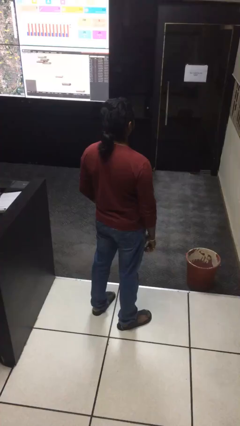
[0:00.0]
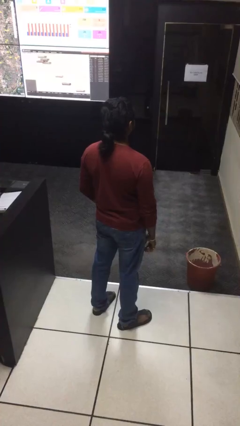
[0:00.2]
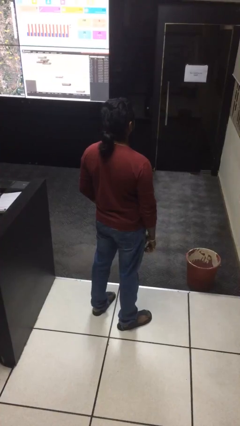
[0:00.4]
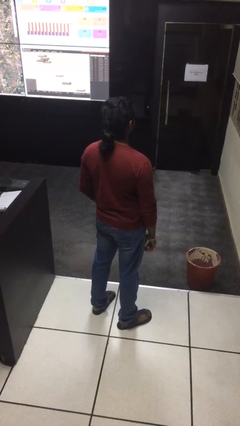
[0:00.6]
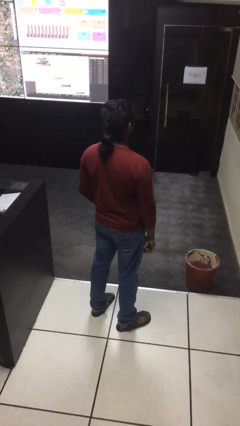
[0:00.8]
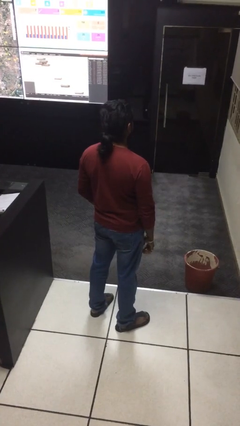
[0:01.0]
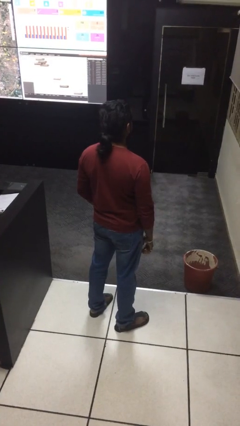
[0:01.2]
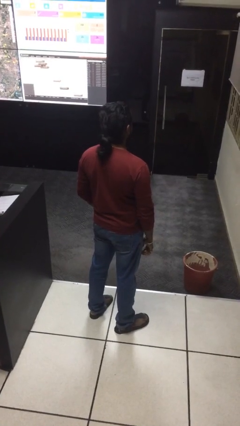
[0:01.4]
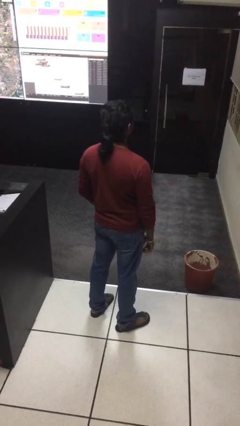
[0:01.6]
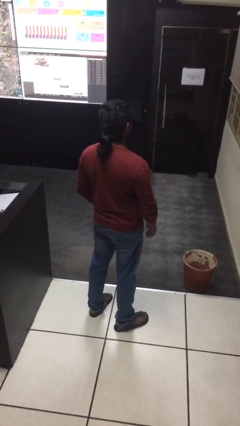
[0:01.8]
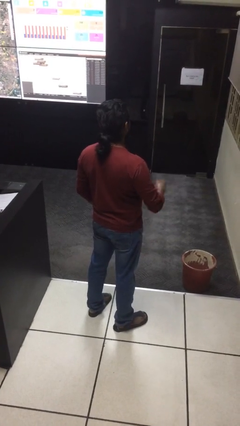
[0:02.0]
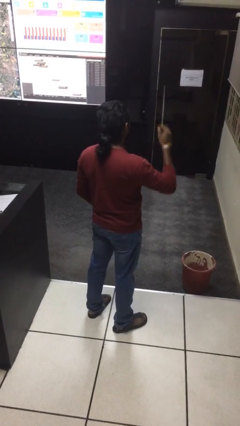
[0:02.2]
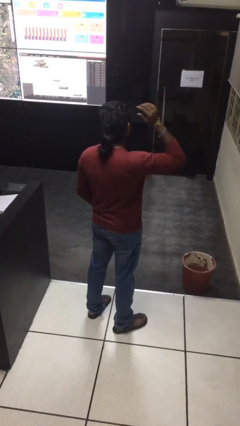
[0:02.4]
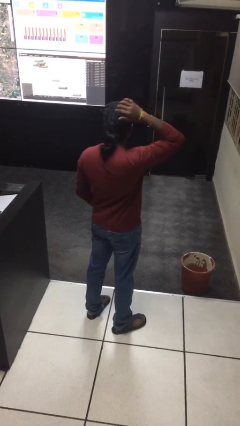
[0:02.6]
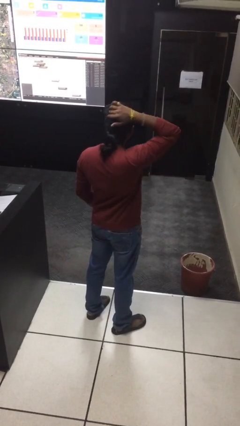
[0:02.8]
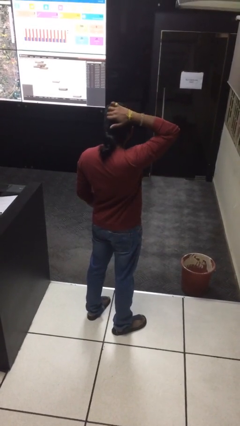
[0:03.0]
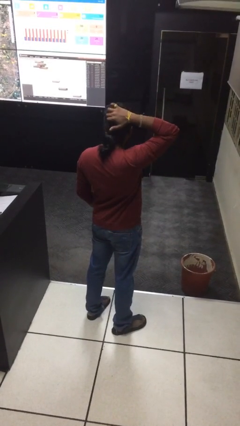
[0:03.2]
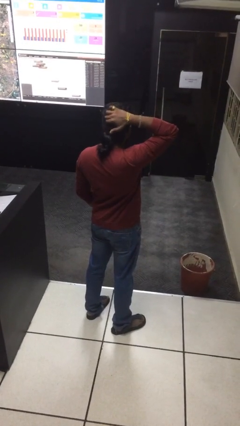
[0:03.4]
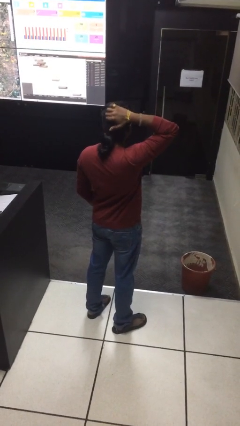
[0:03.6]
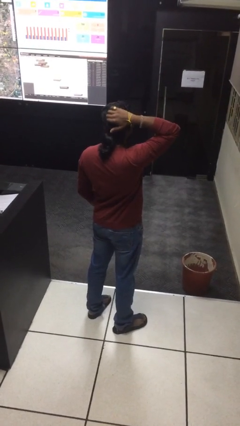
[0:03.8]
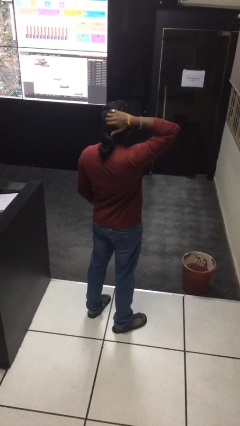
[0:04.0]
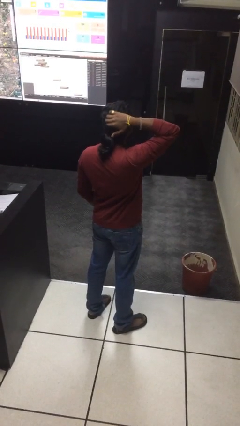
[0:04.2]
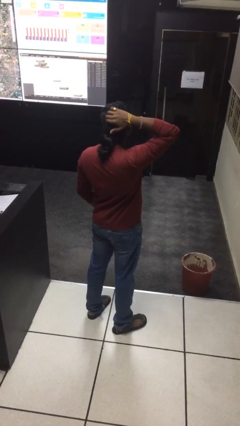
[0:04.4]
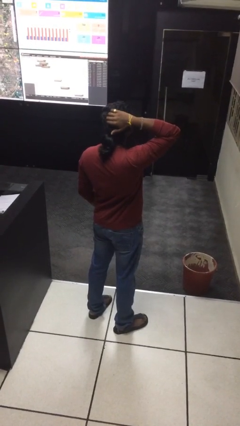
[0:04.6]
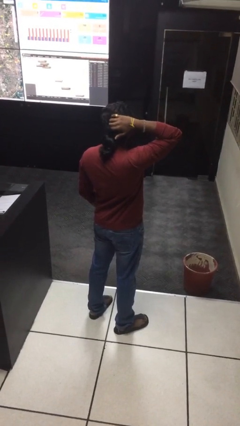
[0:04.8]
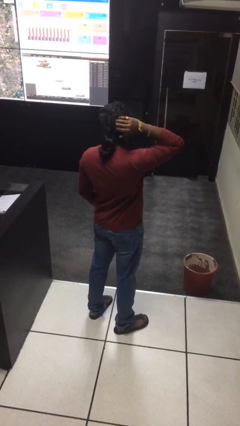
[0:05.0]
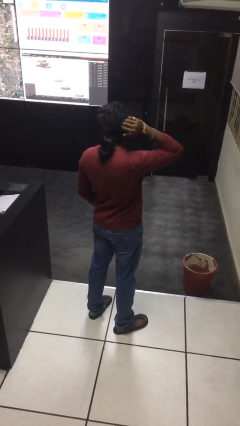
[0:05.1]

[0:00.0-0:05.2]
person scratches face

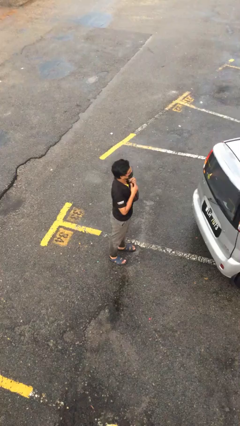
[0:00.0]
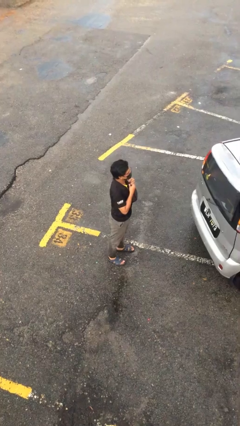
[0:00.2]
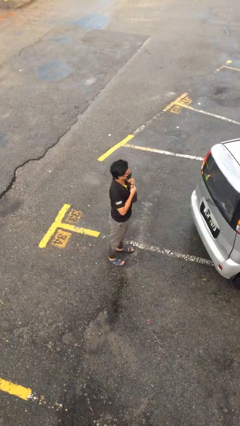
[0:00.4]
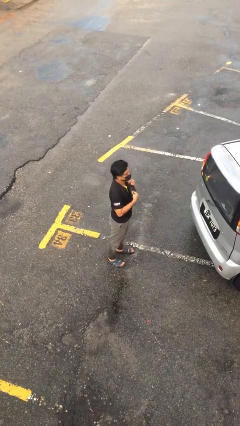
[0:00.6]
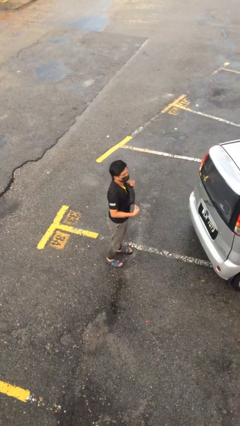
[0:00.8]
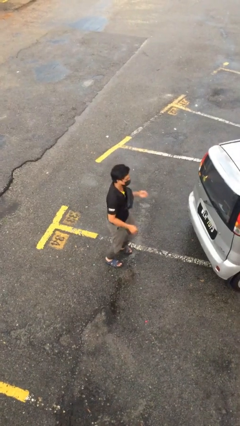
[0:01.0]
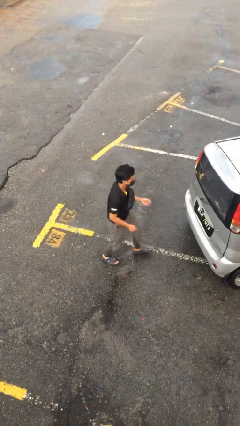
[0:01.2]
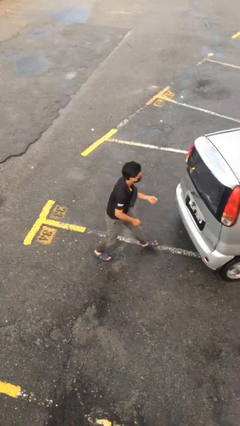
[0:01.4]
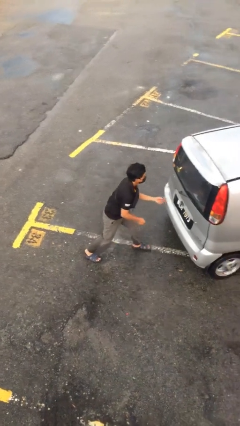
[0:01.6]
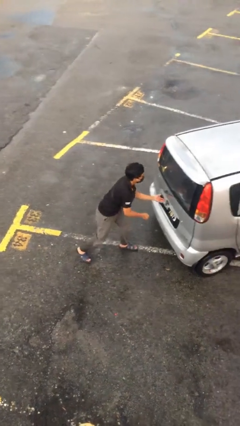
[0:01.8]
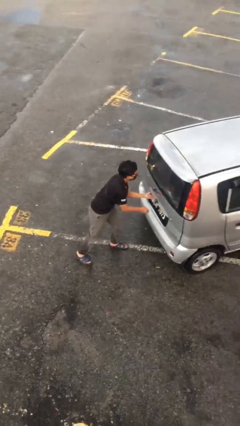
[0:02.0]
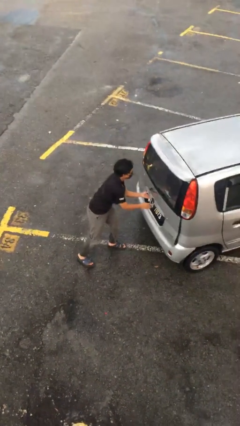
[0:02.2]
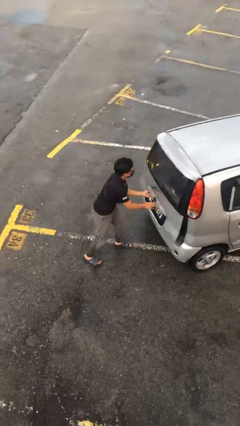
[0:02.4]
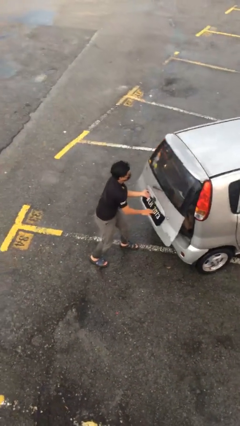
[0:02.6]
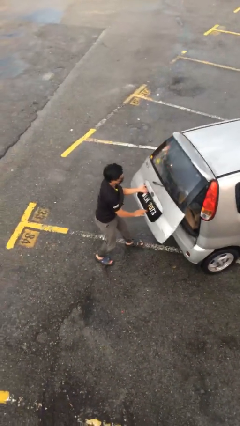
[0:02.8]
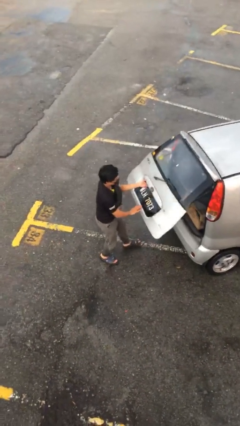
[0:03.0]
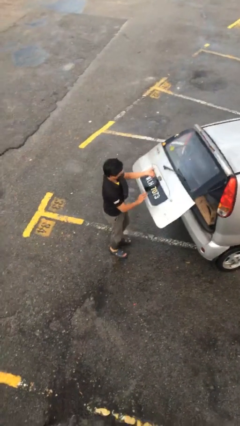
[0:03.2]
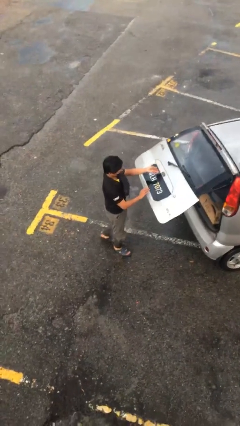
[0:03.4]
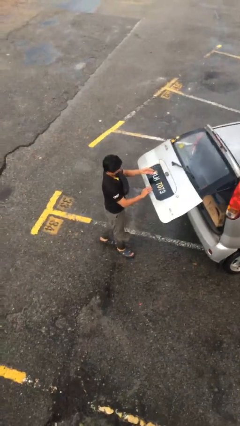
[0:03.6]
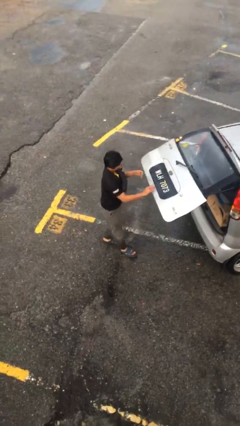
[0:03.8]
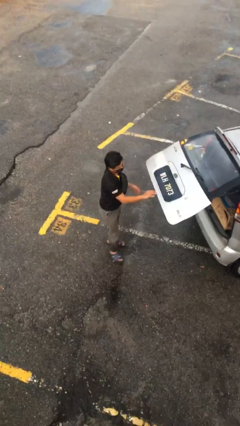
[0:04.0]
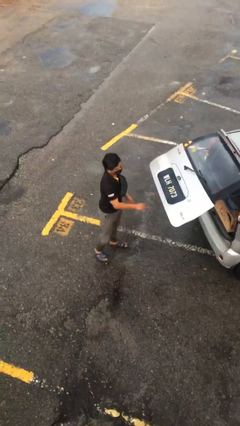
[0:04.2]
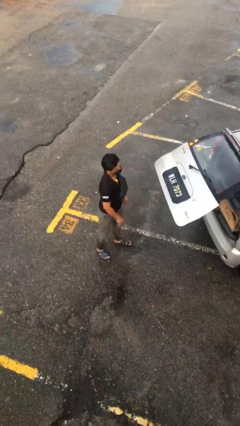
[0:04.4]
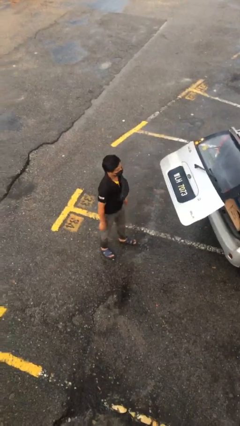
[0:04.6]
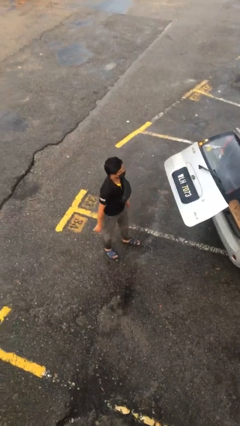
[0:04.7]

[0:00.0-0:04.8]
person opens car trunk

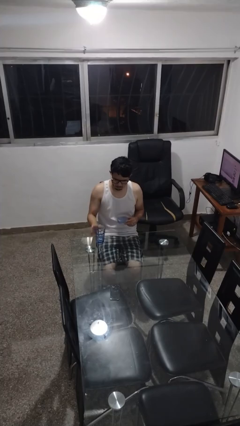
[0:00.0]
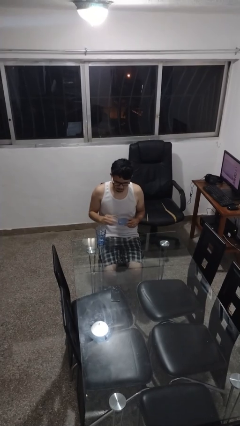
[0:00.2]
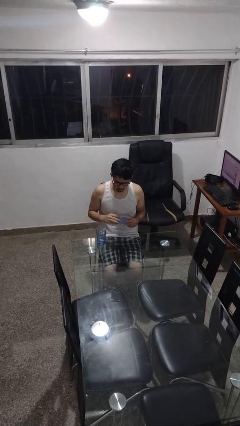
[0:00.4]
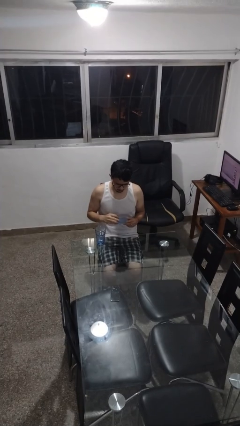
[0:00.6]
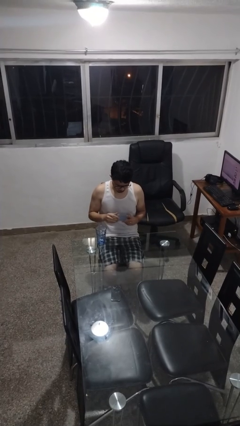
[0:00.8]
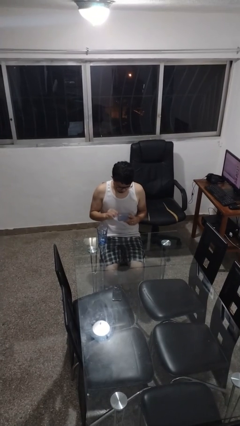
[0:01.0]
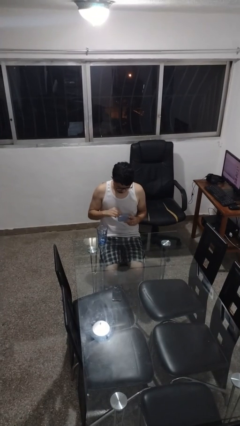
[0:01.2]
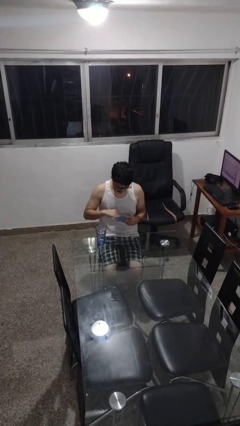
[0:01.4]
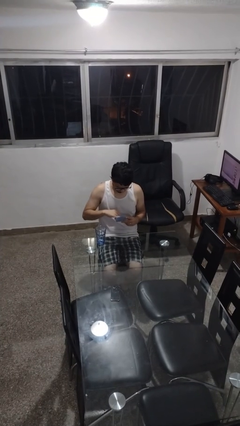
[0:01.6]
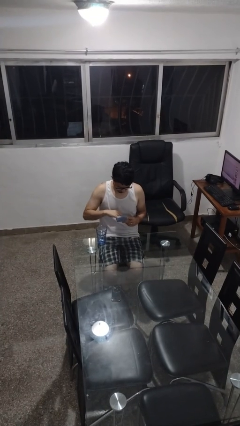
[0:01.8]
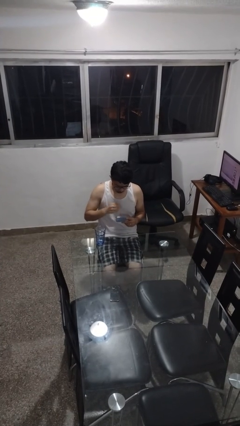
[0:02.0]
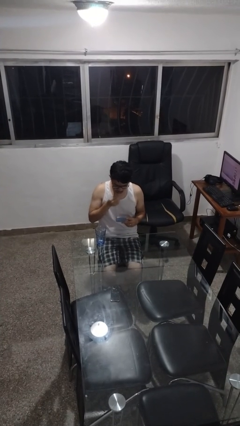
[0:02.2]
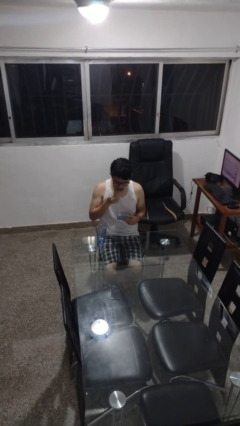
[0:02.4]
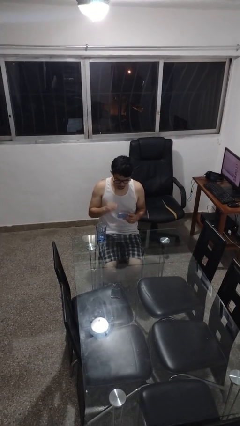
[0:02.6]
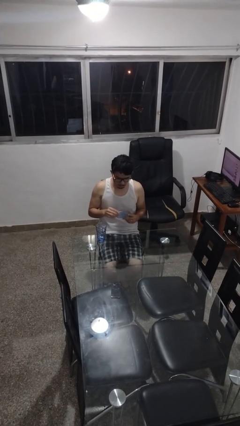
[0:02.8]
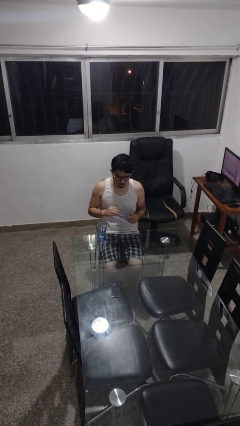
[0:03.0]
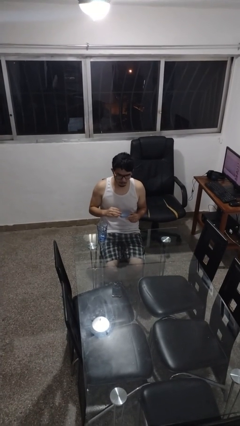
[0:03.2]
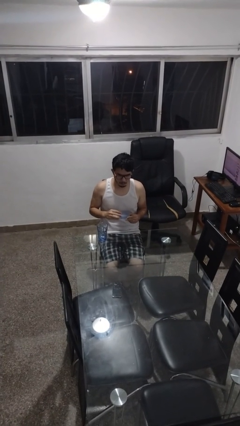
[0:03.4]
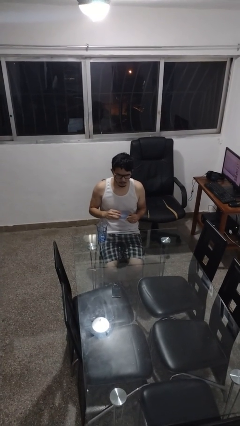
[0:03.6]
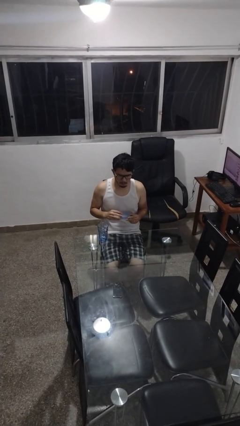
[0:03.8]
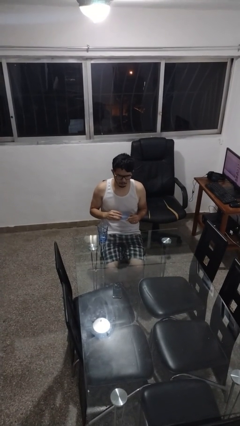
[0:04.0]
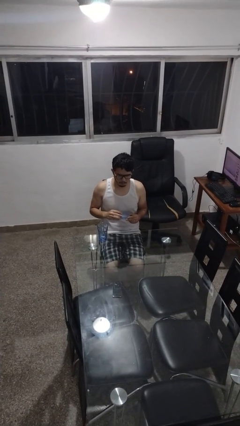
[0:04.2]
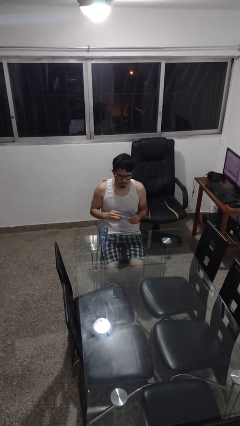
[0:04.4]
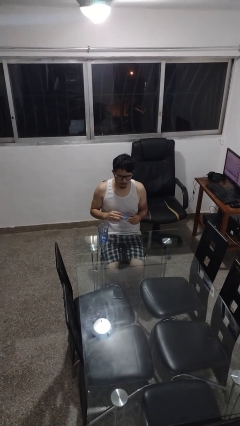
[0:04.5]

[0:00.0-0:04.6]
person takes medicine pills

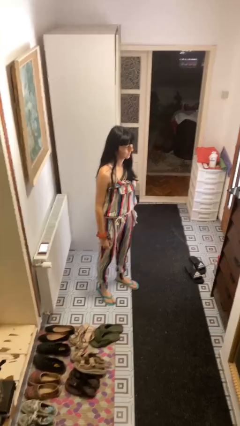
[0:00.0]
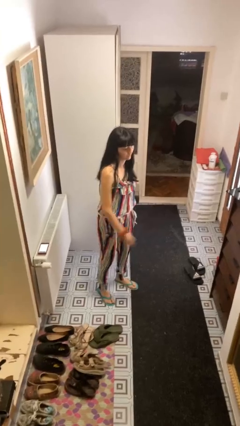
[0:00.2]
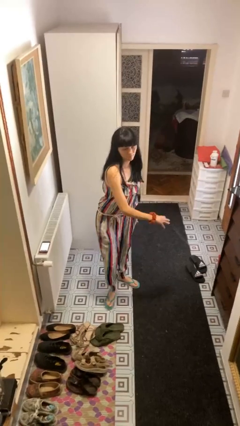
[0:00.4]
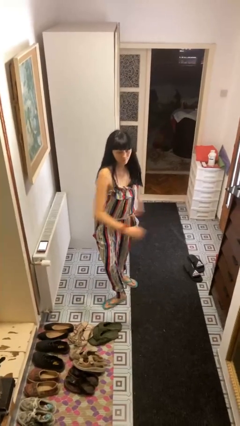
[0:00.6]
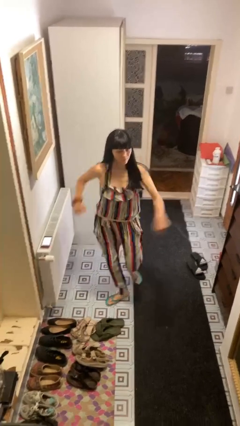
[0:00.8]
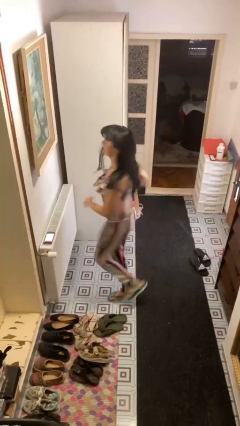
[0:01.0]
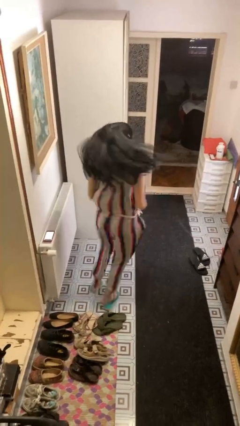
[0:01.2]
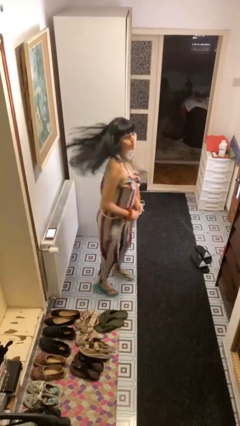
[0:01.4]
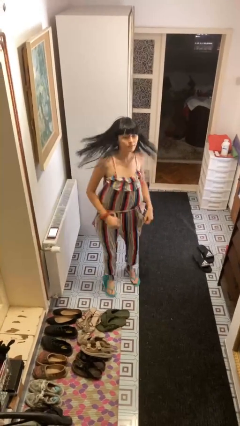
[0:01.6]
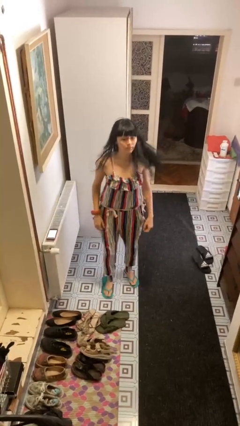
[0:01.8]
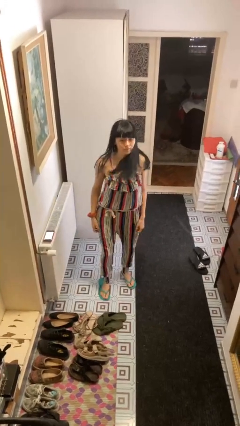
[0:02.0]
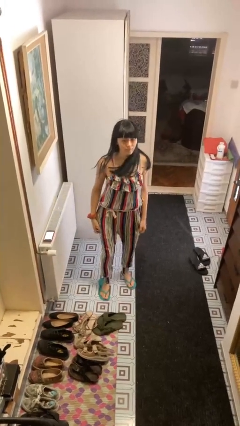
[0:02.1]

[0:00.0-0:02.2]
person twirls

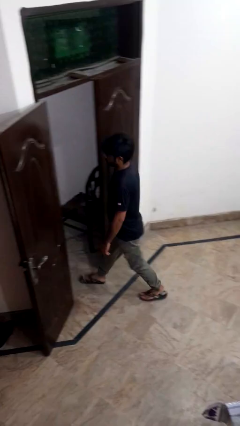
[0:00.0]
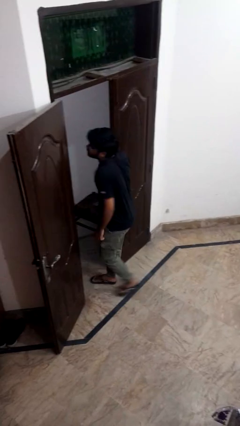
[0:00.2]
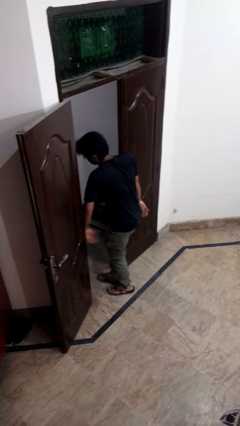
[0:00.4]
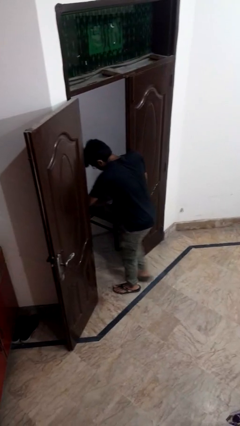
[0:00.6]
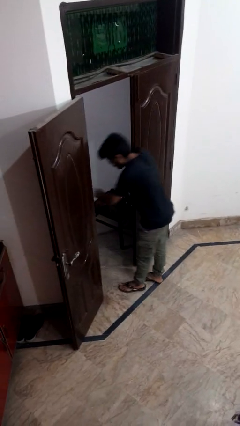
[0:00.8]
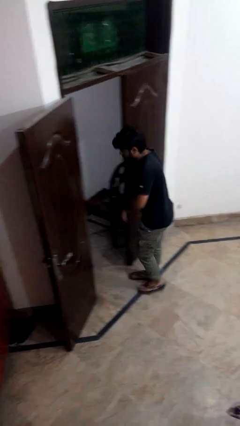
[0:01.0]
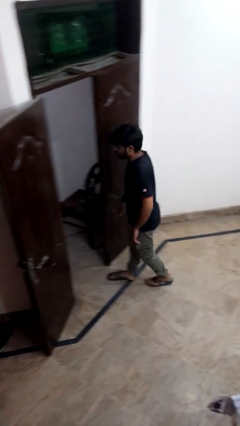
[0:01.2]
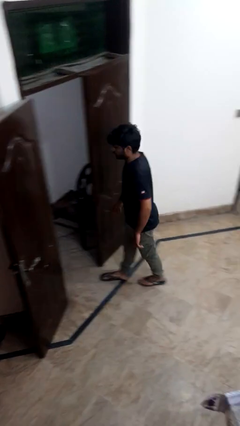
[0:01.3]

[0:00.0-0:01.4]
person bumps into wall
